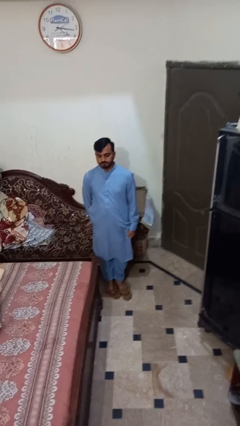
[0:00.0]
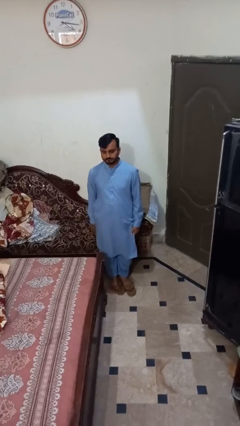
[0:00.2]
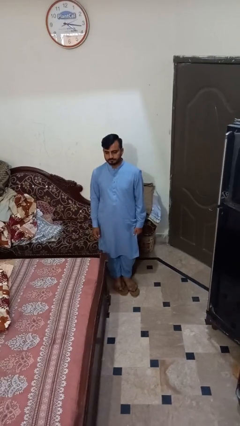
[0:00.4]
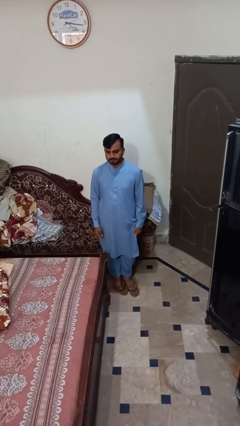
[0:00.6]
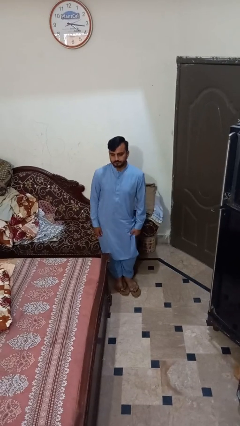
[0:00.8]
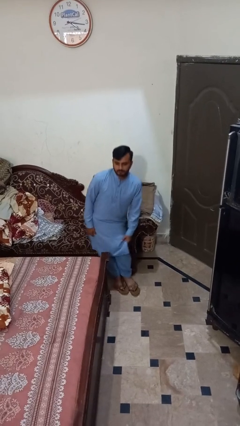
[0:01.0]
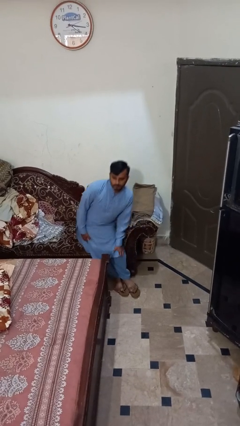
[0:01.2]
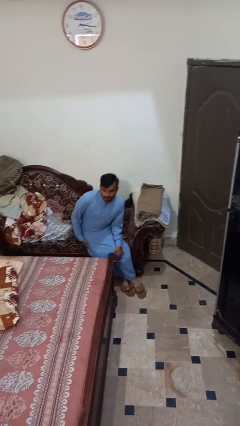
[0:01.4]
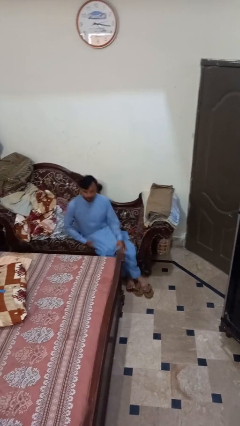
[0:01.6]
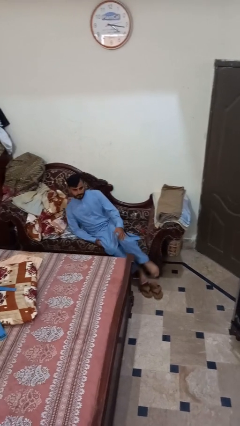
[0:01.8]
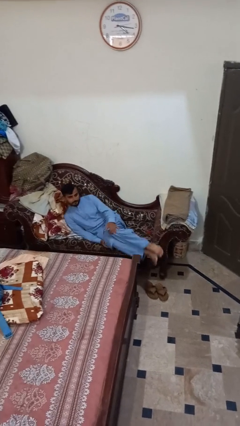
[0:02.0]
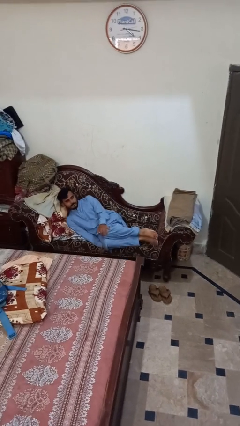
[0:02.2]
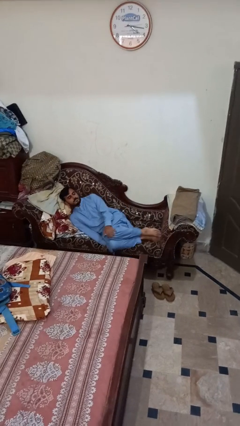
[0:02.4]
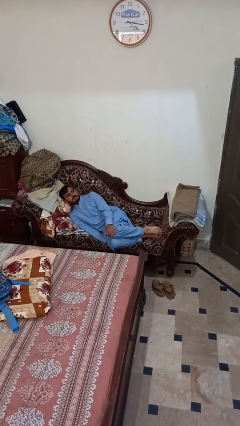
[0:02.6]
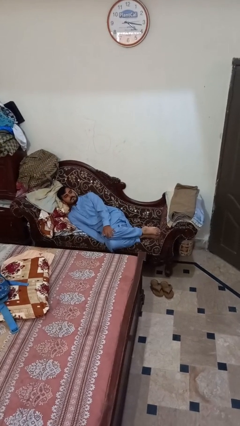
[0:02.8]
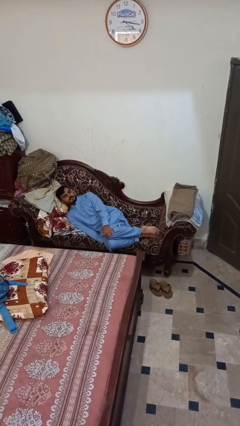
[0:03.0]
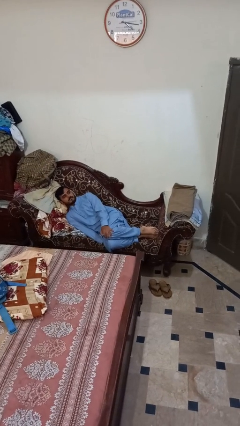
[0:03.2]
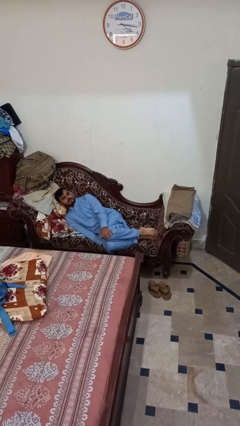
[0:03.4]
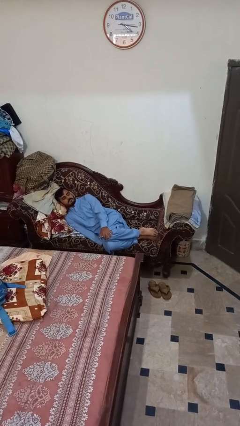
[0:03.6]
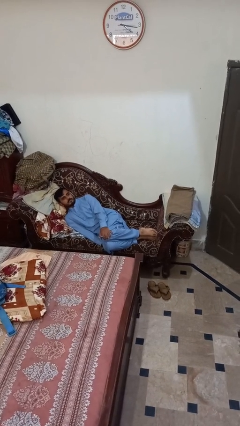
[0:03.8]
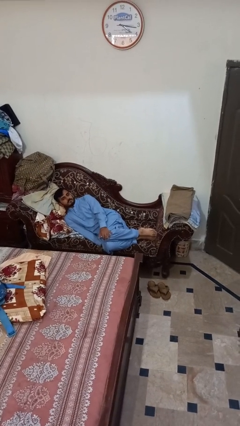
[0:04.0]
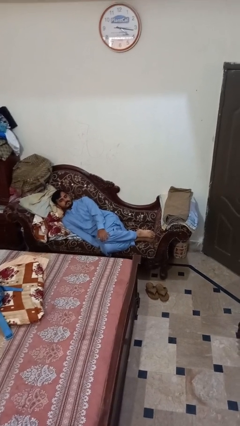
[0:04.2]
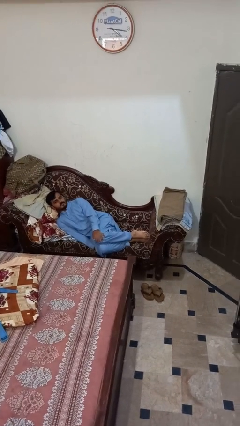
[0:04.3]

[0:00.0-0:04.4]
person lies down on couch

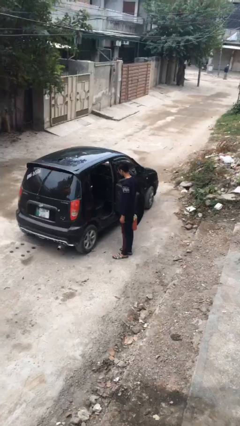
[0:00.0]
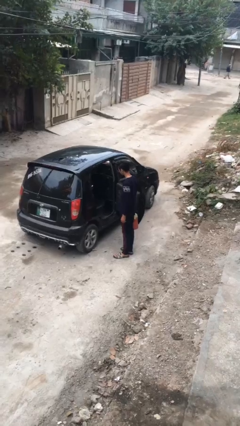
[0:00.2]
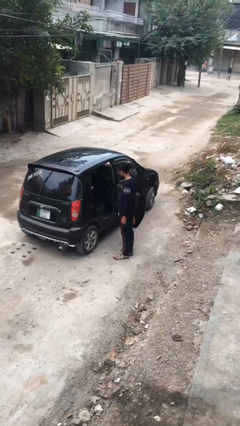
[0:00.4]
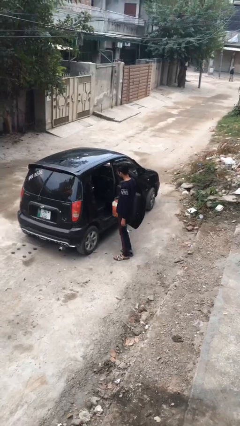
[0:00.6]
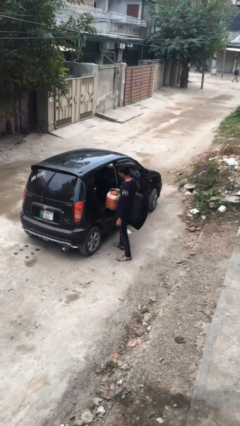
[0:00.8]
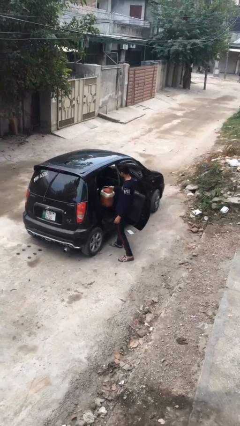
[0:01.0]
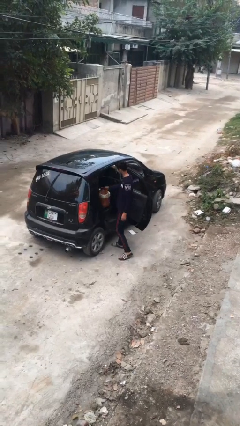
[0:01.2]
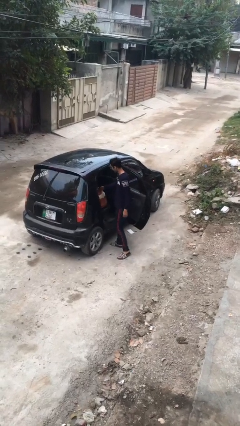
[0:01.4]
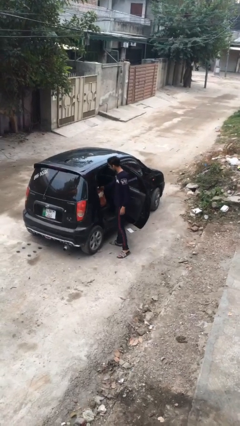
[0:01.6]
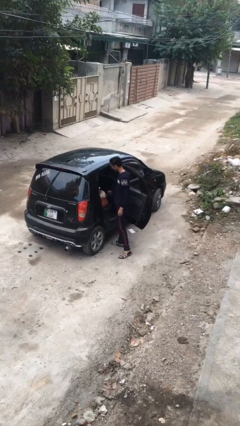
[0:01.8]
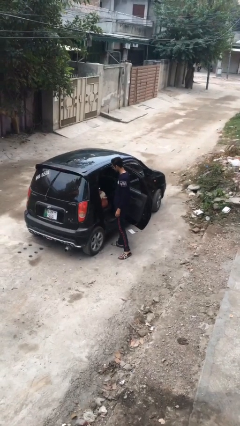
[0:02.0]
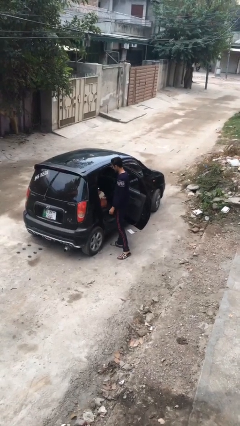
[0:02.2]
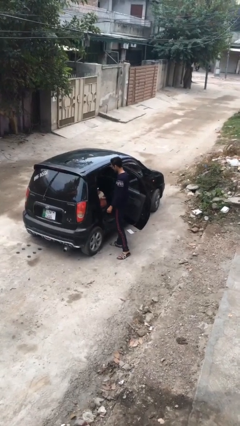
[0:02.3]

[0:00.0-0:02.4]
person loads car

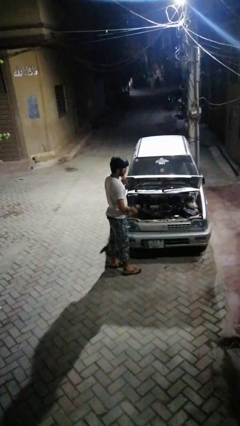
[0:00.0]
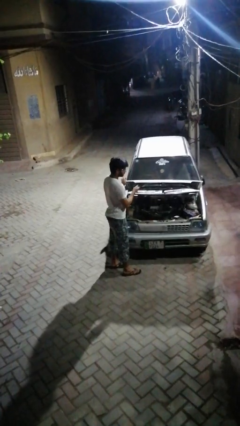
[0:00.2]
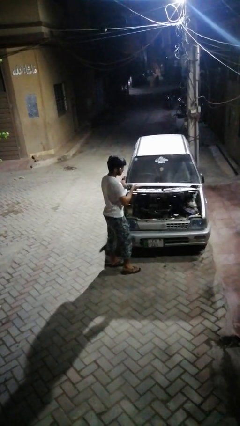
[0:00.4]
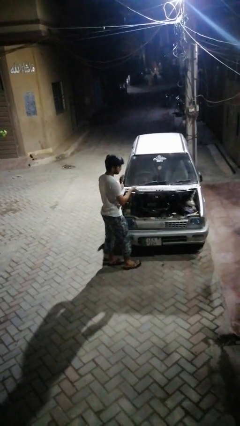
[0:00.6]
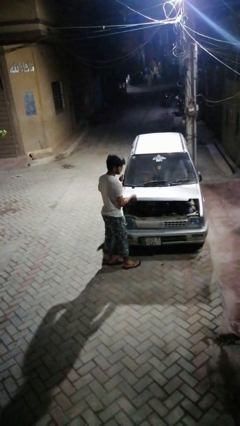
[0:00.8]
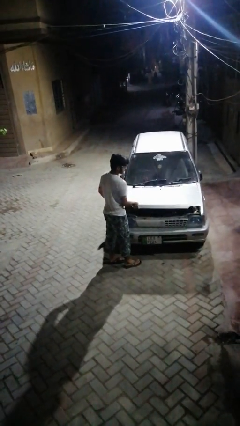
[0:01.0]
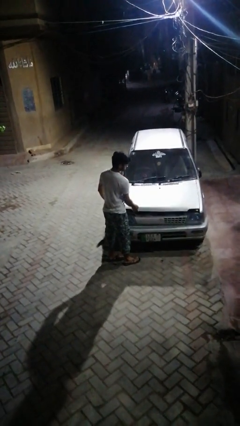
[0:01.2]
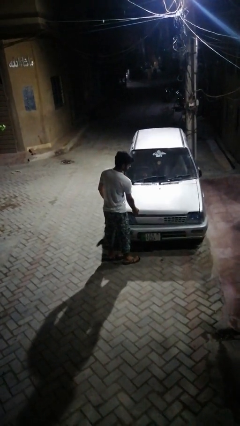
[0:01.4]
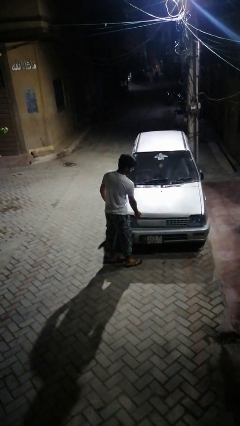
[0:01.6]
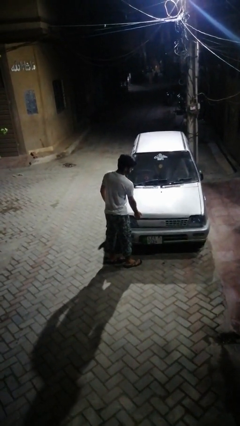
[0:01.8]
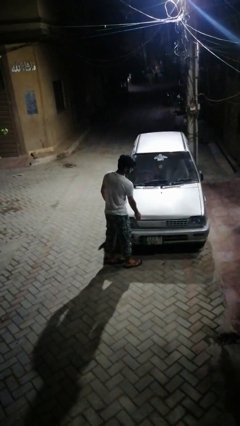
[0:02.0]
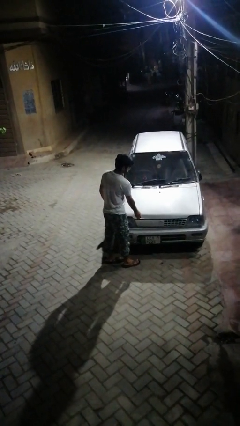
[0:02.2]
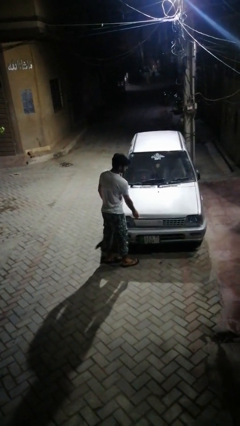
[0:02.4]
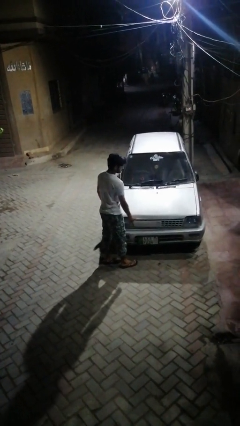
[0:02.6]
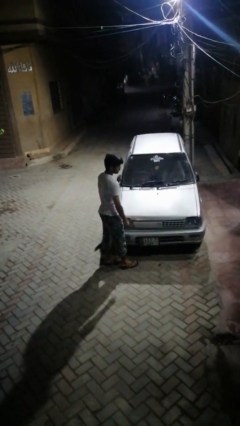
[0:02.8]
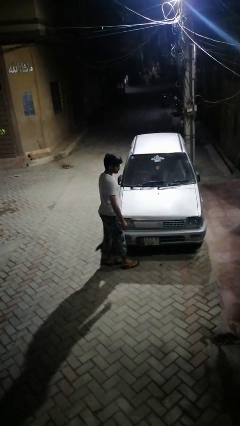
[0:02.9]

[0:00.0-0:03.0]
person closes car hood

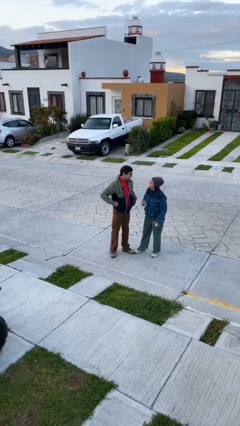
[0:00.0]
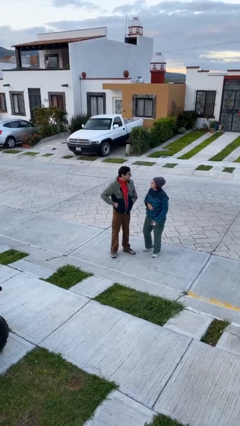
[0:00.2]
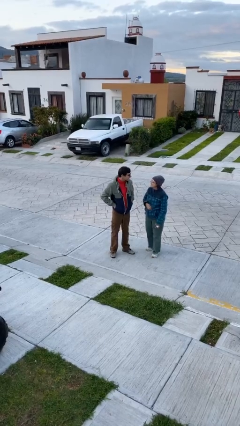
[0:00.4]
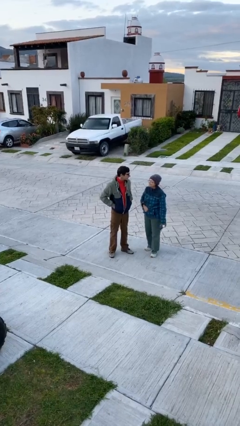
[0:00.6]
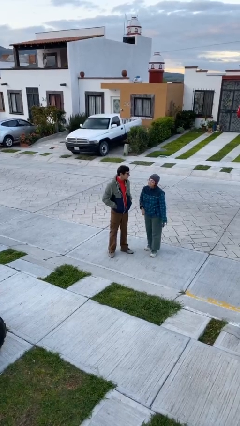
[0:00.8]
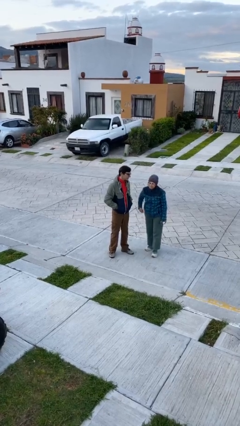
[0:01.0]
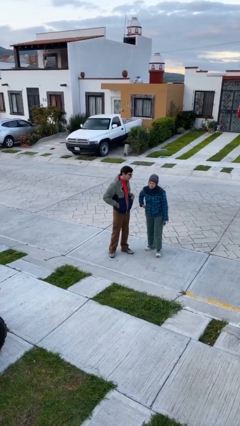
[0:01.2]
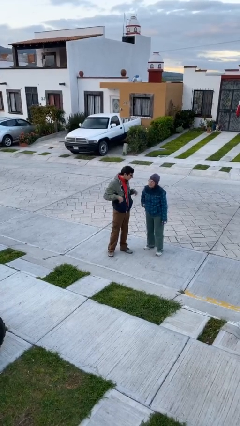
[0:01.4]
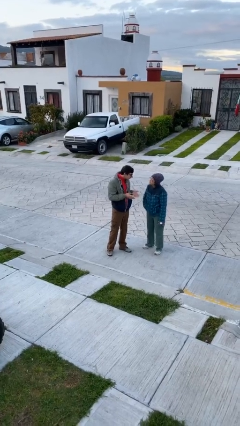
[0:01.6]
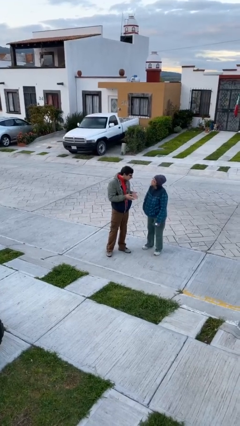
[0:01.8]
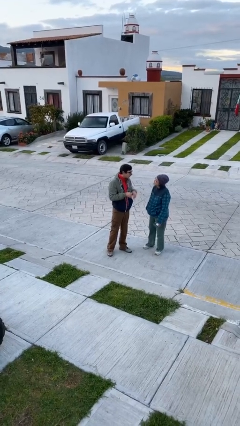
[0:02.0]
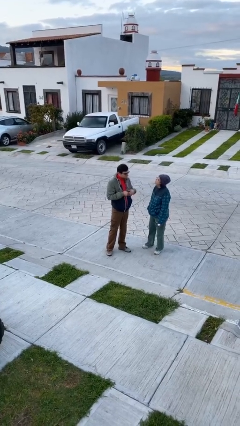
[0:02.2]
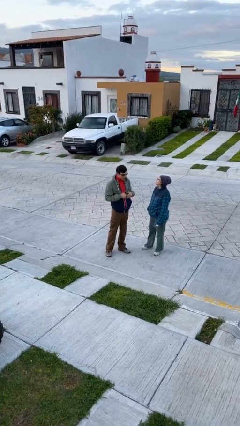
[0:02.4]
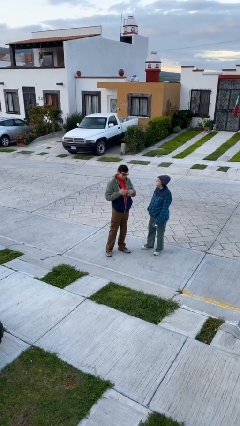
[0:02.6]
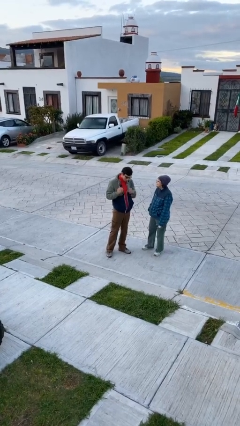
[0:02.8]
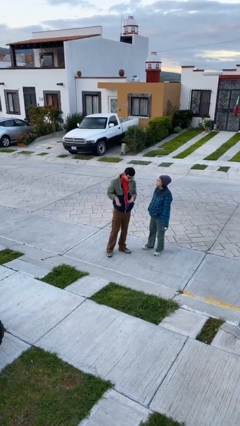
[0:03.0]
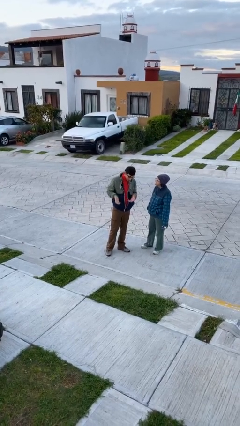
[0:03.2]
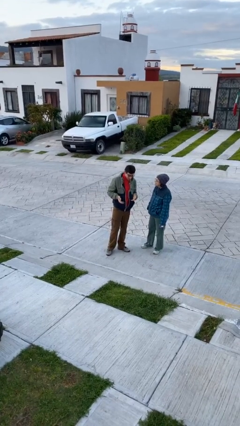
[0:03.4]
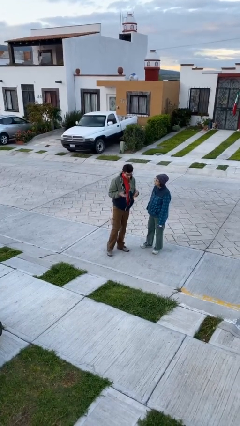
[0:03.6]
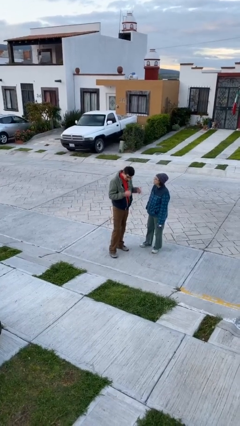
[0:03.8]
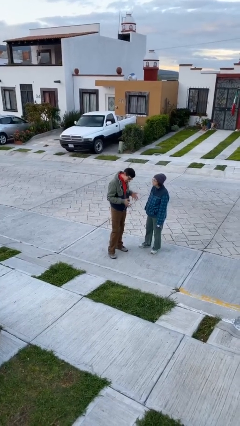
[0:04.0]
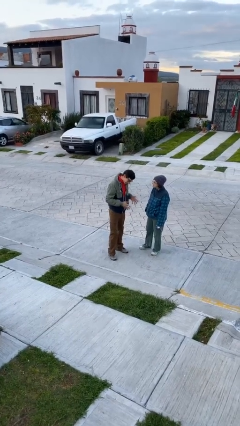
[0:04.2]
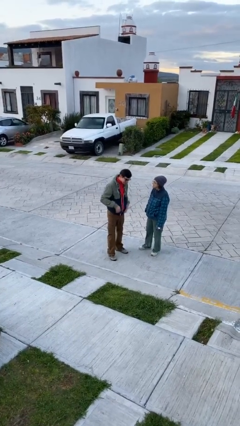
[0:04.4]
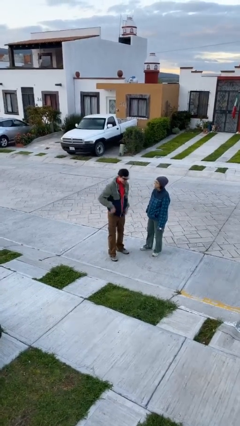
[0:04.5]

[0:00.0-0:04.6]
person talks to person

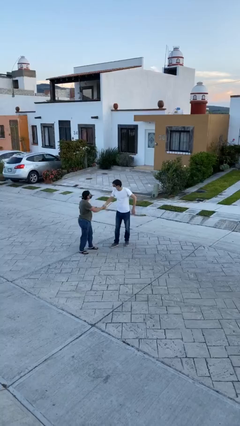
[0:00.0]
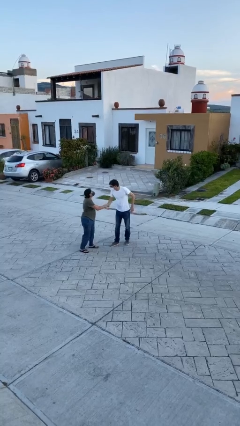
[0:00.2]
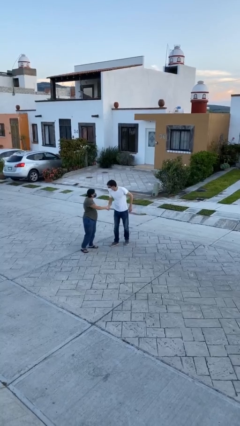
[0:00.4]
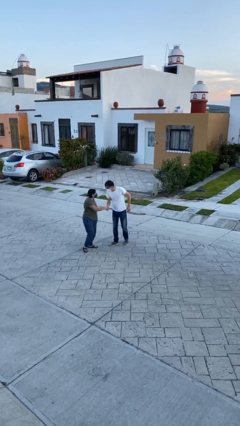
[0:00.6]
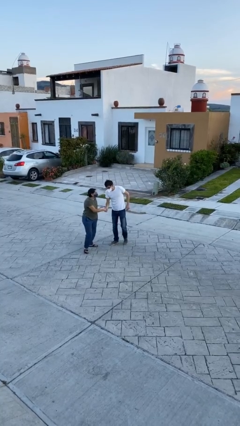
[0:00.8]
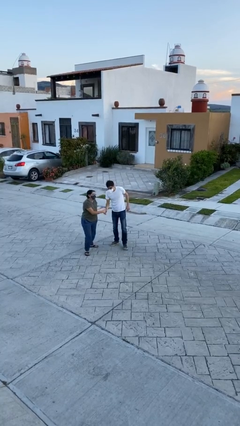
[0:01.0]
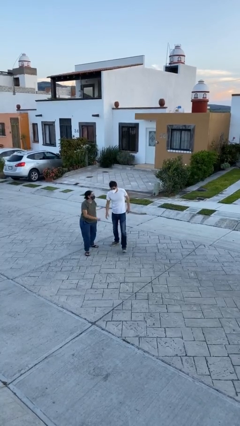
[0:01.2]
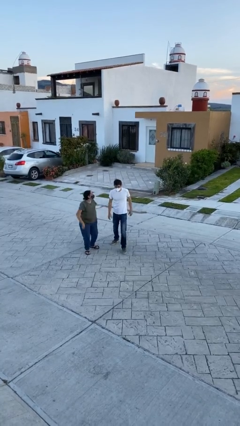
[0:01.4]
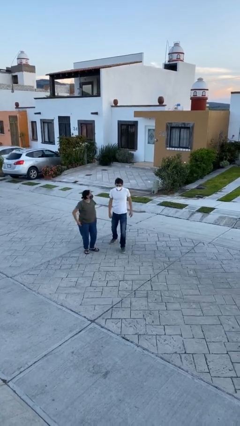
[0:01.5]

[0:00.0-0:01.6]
person shakes hand

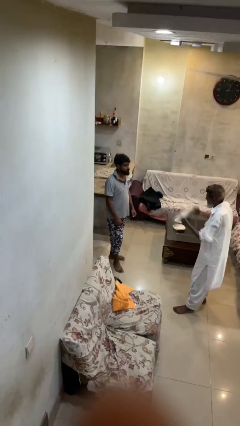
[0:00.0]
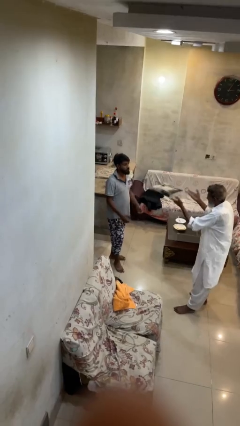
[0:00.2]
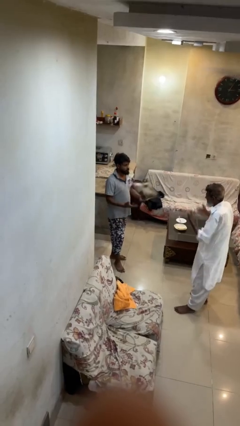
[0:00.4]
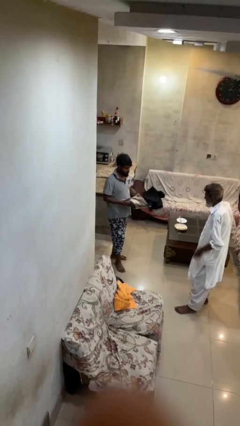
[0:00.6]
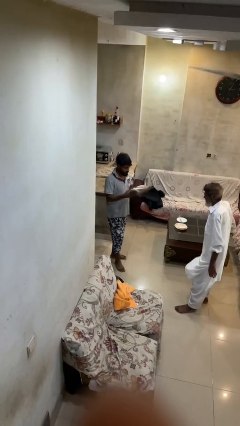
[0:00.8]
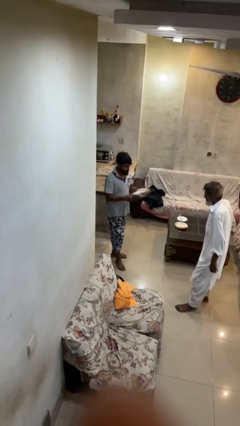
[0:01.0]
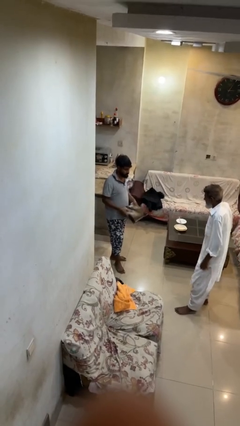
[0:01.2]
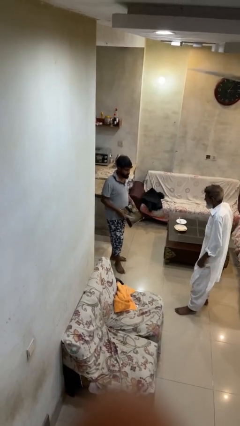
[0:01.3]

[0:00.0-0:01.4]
person catches object from person

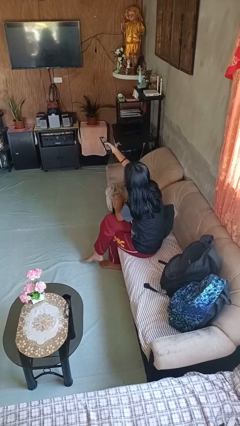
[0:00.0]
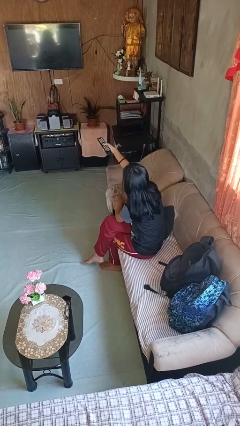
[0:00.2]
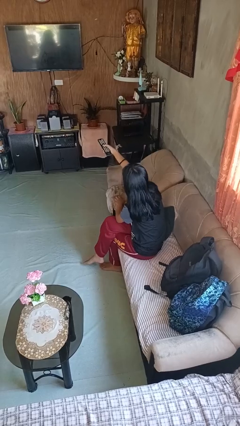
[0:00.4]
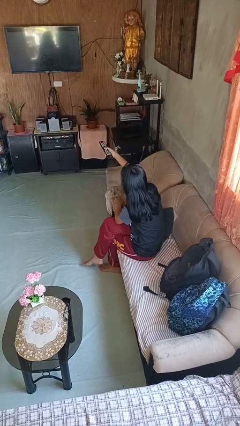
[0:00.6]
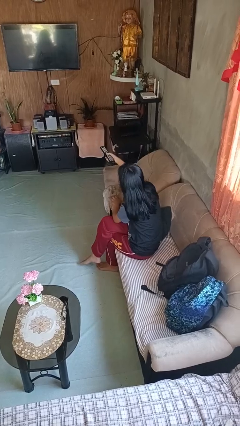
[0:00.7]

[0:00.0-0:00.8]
person uses television remote
